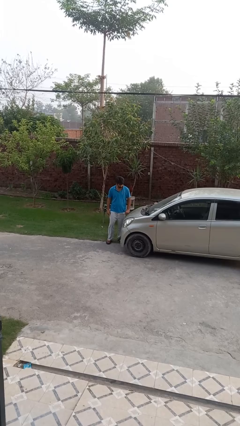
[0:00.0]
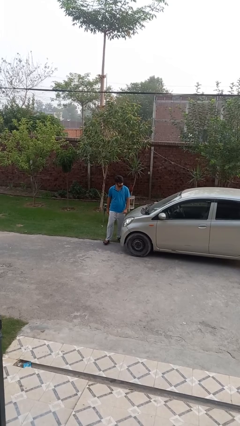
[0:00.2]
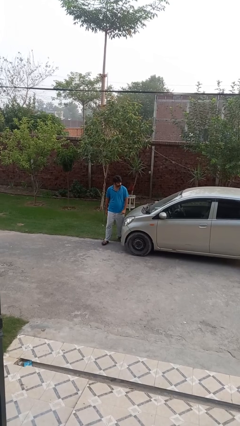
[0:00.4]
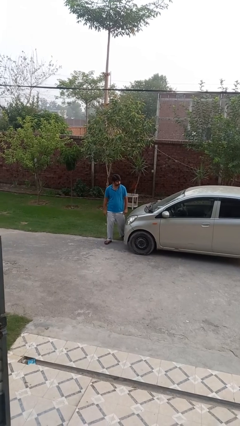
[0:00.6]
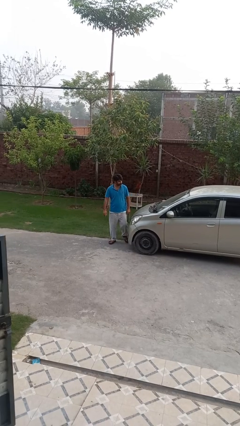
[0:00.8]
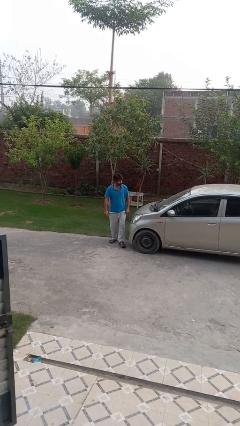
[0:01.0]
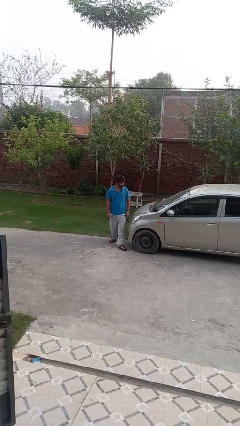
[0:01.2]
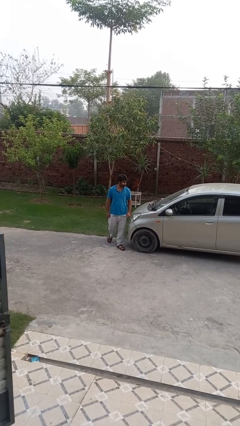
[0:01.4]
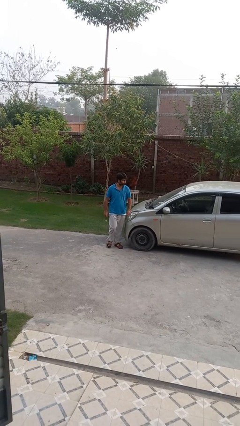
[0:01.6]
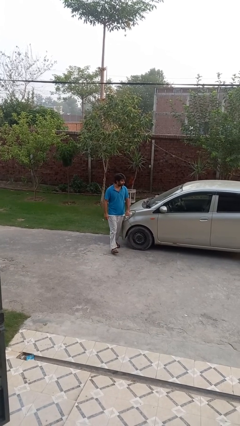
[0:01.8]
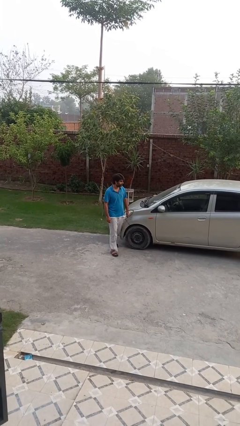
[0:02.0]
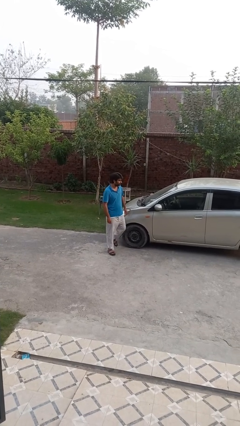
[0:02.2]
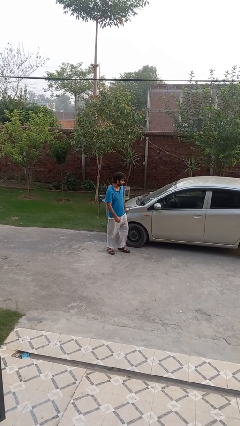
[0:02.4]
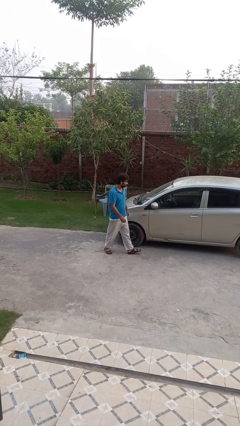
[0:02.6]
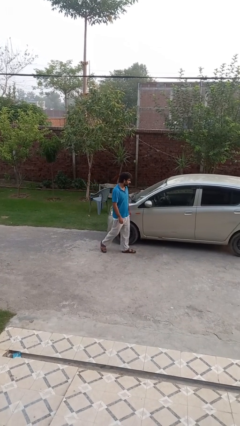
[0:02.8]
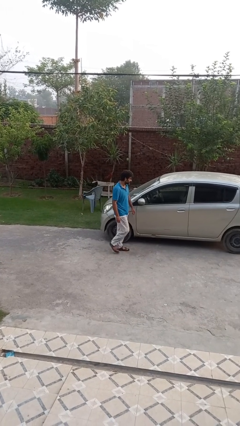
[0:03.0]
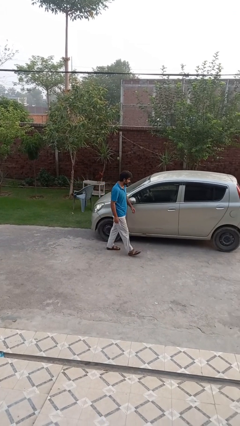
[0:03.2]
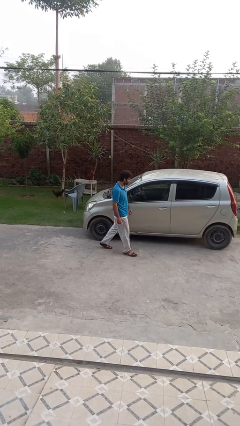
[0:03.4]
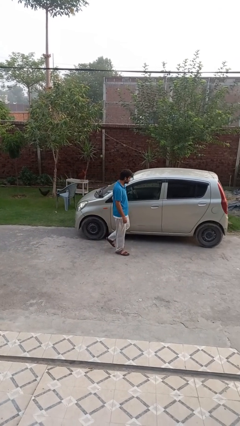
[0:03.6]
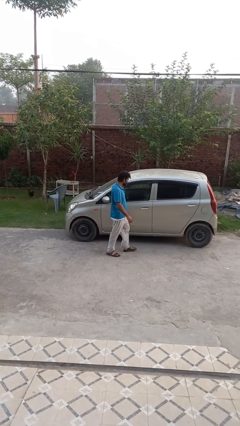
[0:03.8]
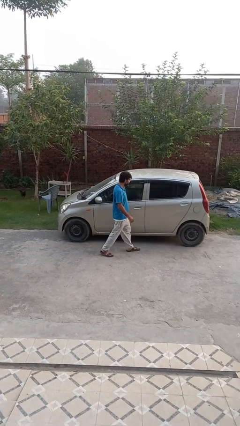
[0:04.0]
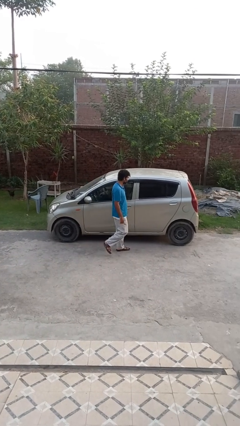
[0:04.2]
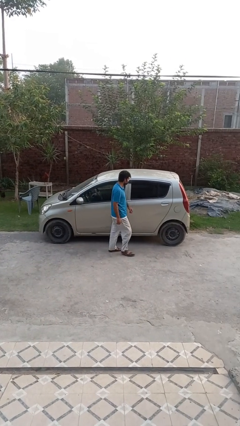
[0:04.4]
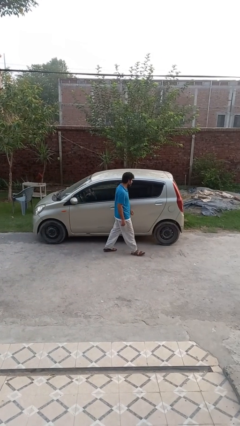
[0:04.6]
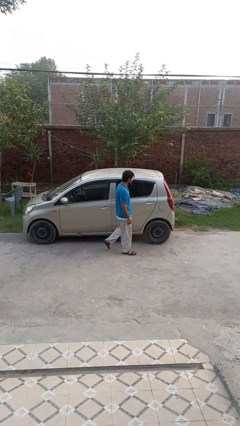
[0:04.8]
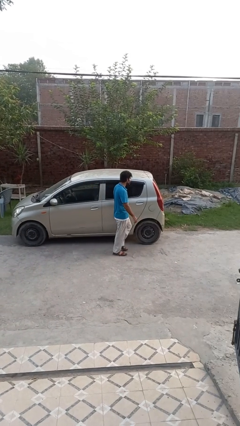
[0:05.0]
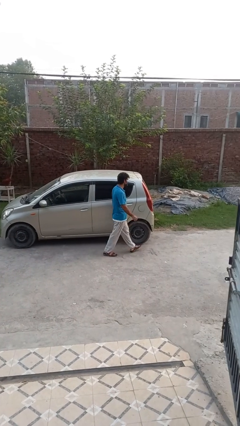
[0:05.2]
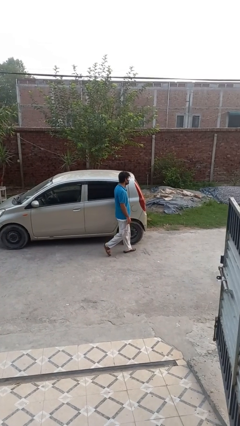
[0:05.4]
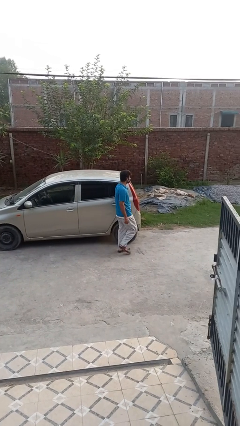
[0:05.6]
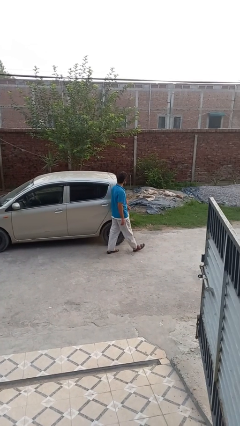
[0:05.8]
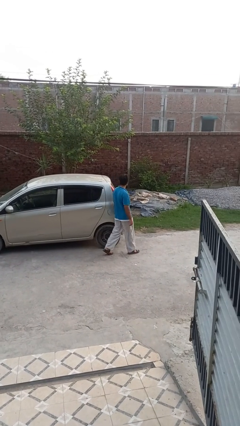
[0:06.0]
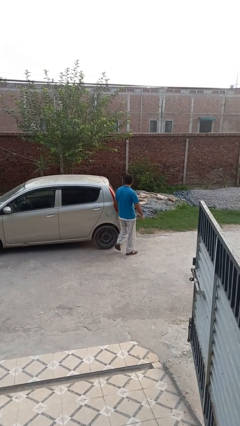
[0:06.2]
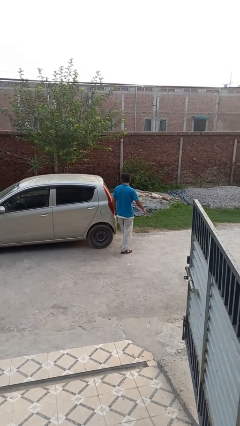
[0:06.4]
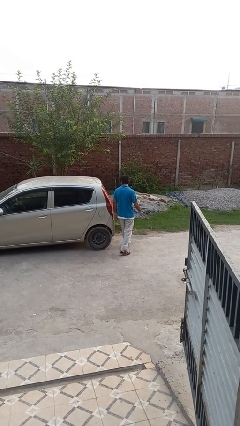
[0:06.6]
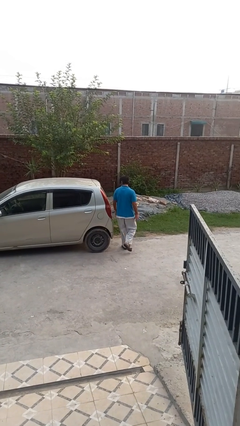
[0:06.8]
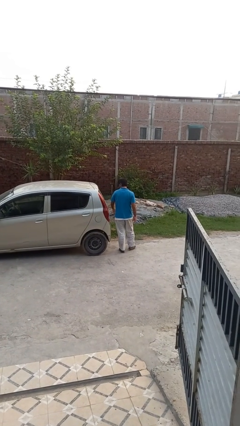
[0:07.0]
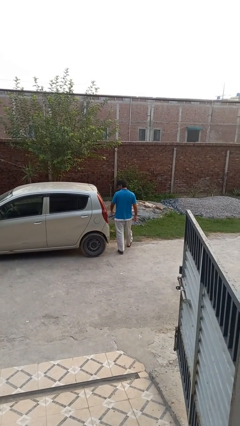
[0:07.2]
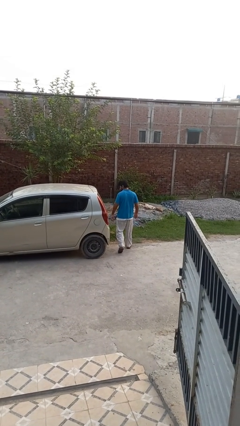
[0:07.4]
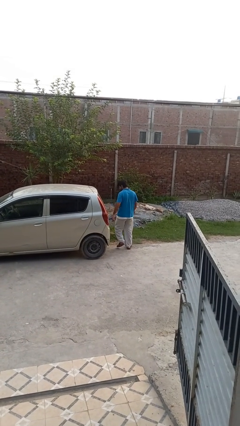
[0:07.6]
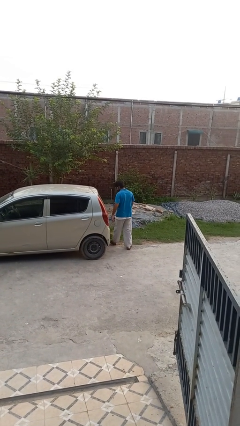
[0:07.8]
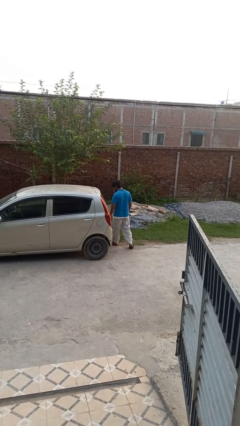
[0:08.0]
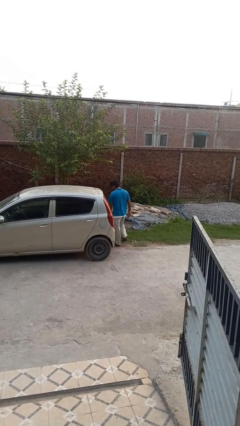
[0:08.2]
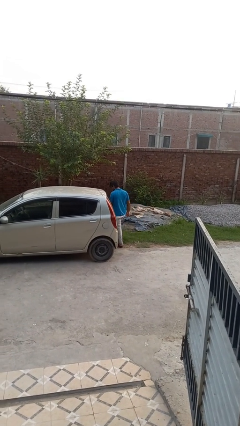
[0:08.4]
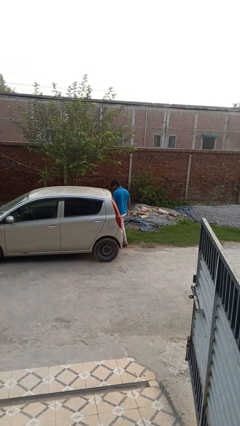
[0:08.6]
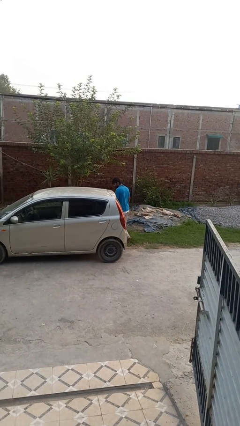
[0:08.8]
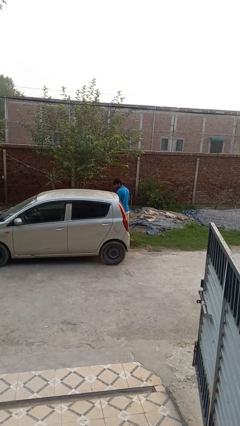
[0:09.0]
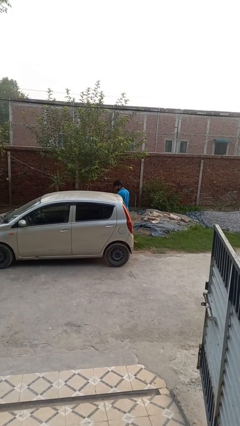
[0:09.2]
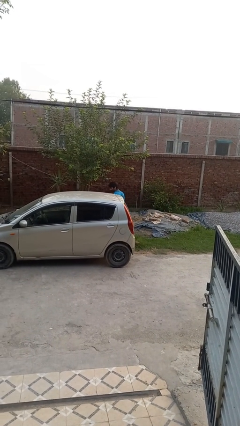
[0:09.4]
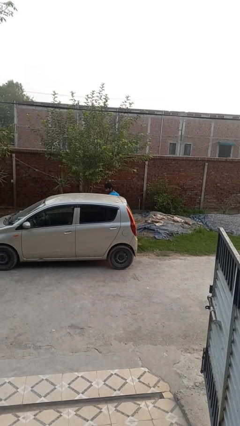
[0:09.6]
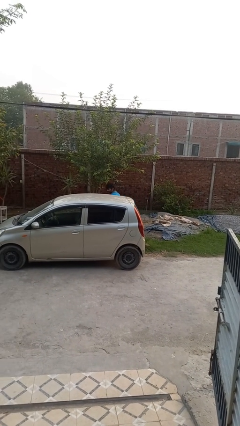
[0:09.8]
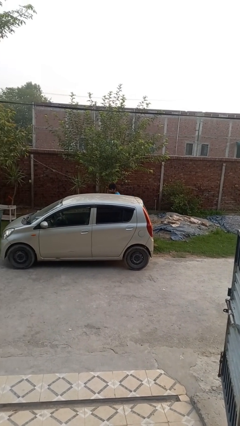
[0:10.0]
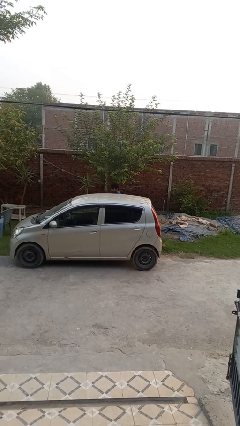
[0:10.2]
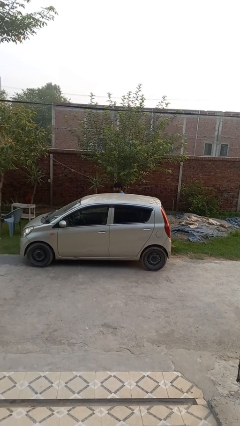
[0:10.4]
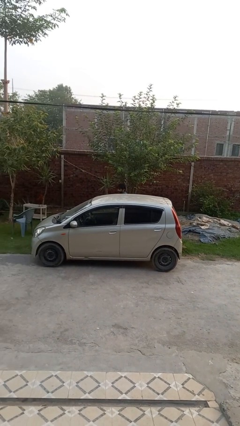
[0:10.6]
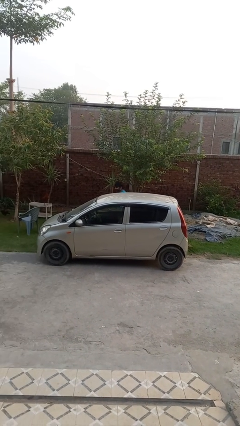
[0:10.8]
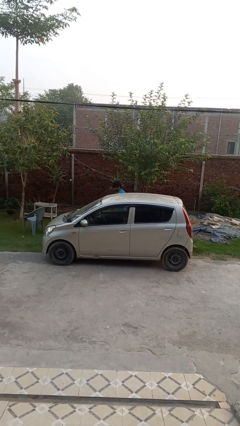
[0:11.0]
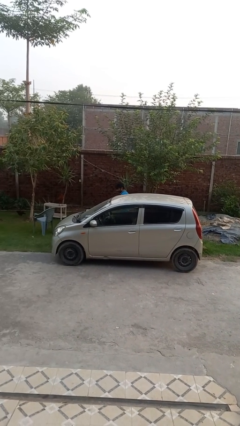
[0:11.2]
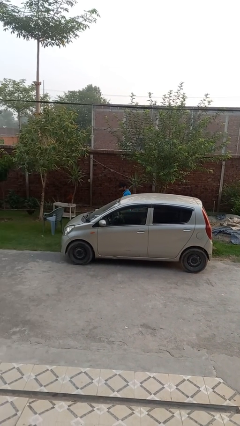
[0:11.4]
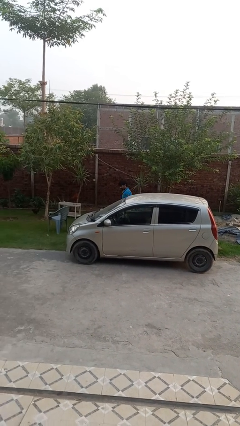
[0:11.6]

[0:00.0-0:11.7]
person walks around car

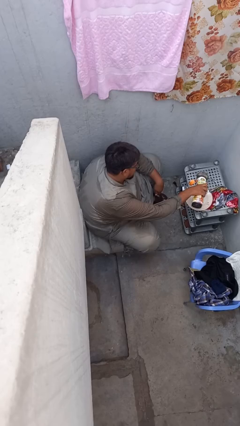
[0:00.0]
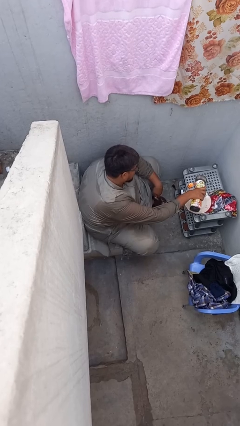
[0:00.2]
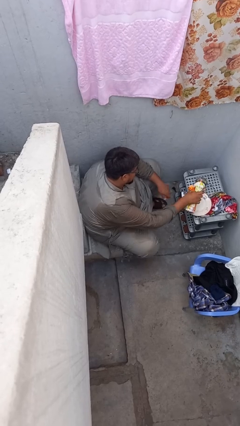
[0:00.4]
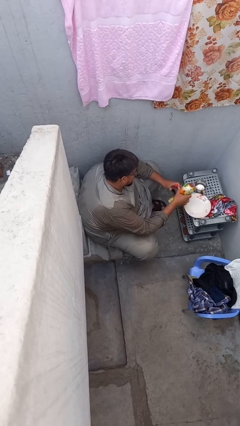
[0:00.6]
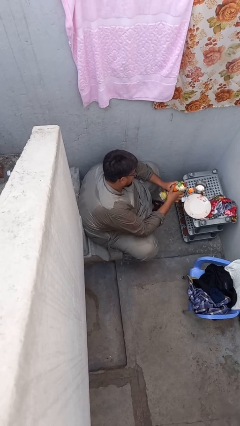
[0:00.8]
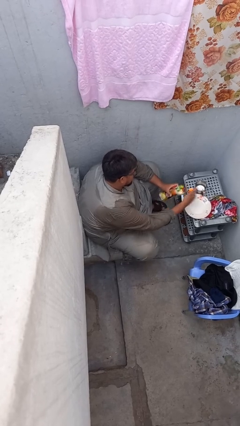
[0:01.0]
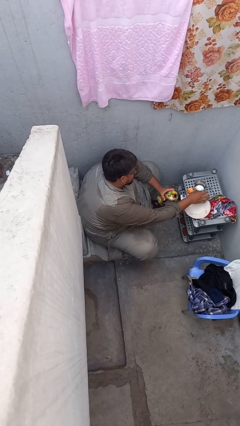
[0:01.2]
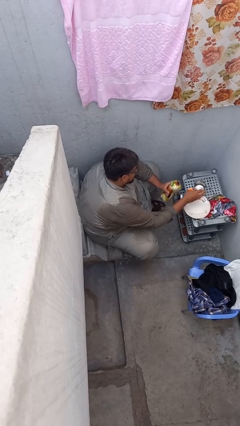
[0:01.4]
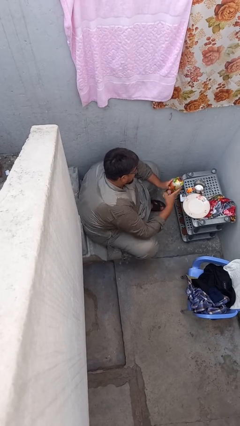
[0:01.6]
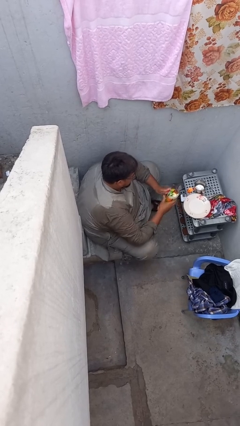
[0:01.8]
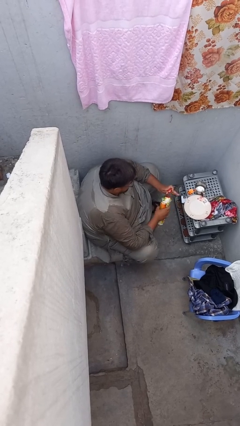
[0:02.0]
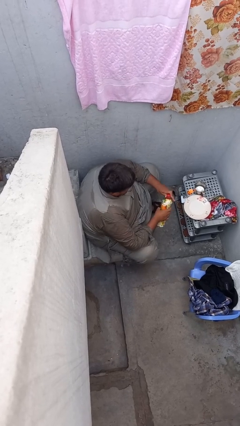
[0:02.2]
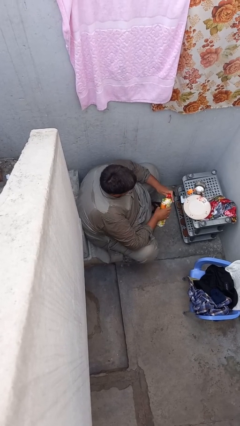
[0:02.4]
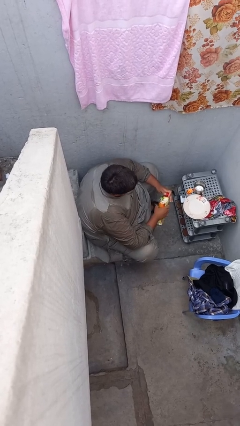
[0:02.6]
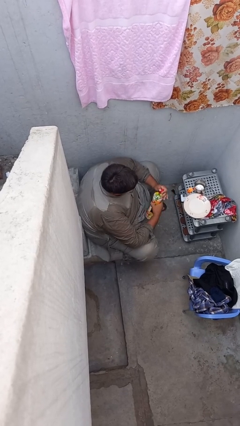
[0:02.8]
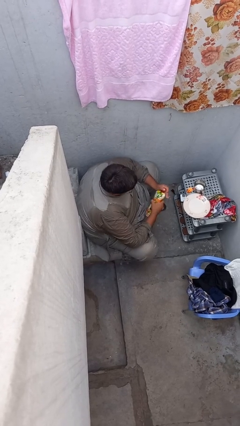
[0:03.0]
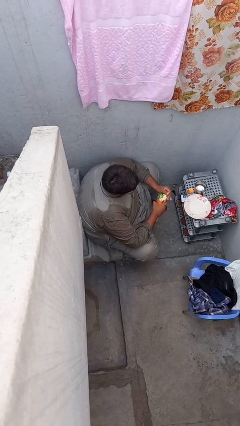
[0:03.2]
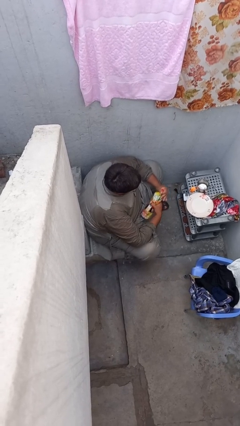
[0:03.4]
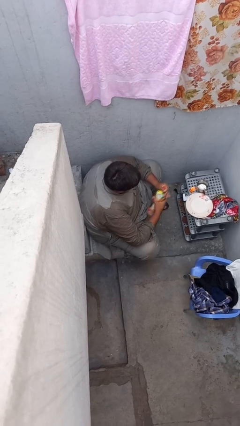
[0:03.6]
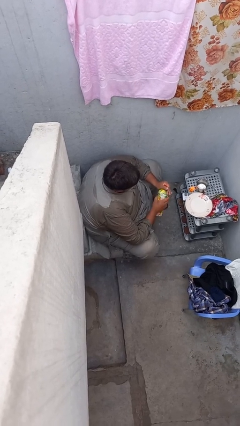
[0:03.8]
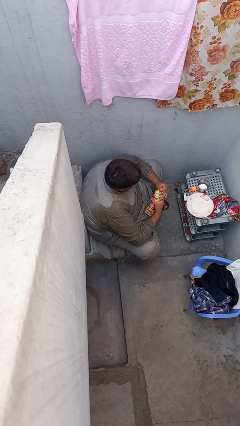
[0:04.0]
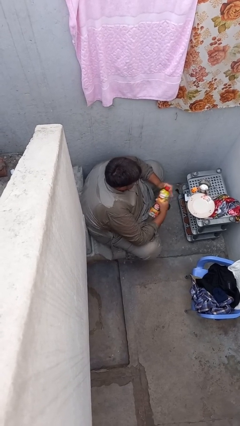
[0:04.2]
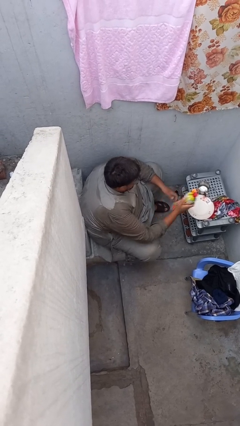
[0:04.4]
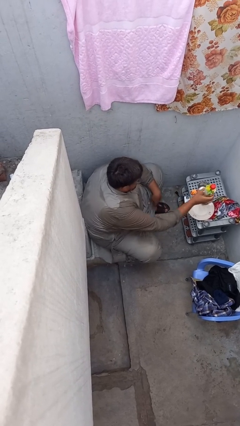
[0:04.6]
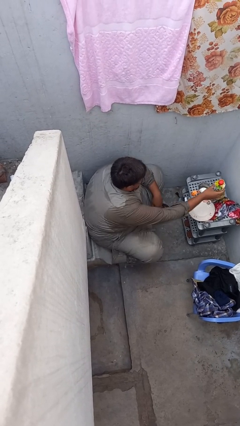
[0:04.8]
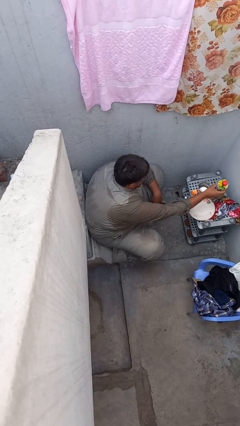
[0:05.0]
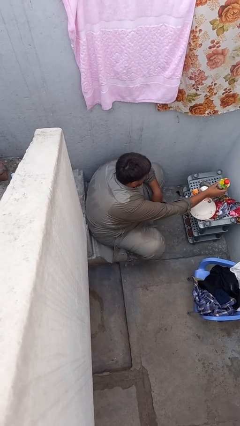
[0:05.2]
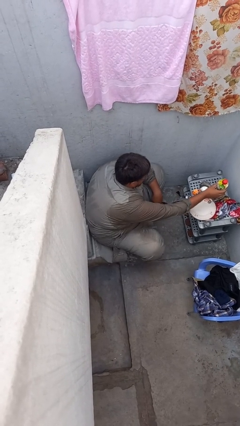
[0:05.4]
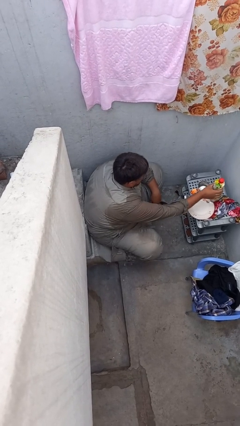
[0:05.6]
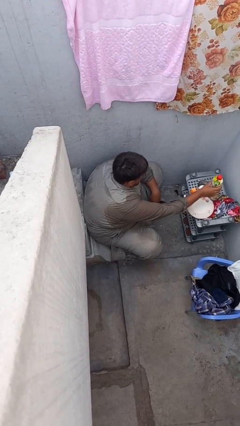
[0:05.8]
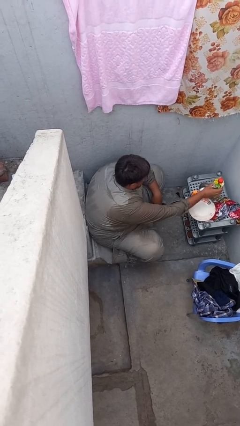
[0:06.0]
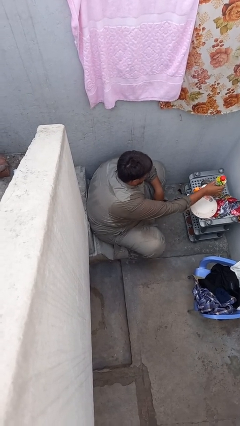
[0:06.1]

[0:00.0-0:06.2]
person screws lid to bottle
